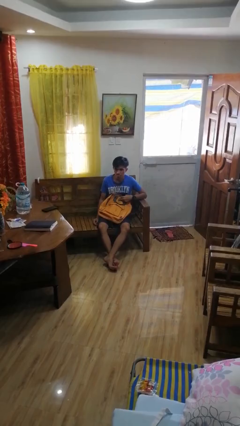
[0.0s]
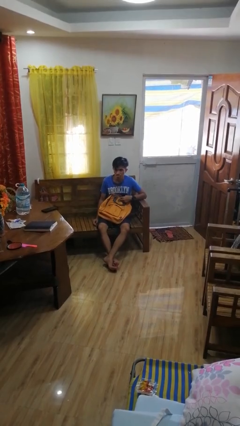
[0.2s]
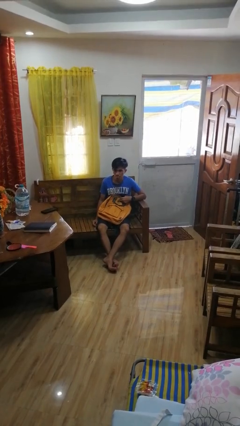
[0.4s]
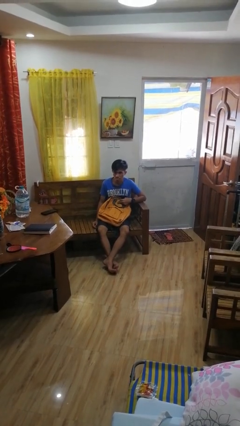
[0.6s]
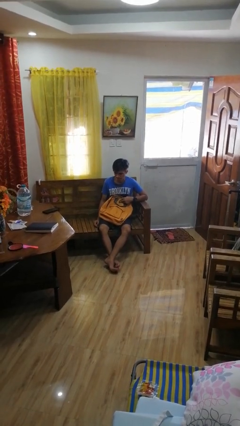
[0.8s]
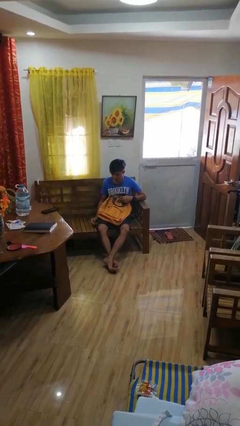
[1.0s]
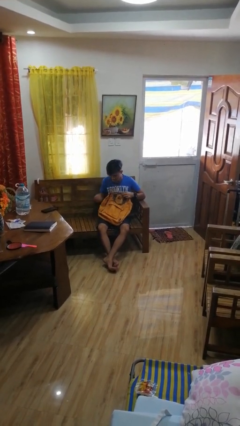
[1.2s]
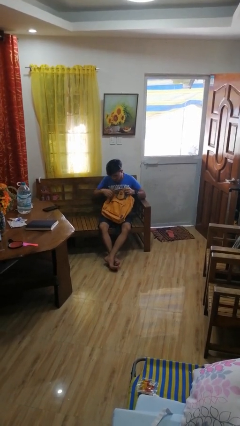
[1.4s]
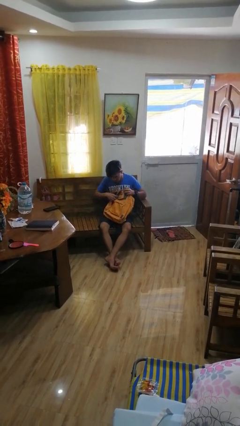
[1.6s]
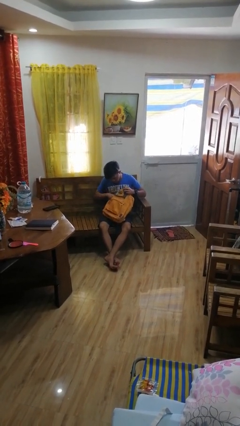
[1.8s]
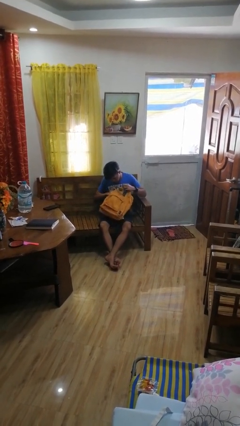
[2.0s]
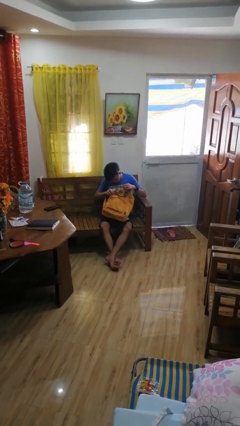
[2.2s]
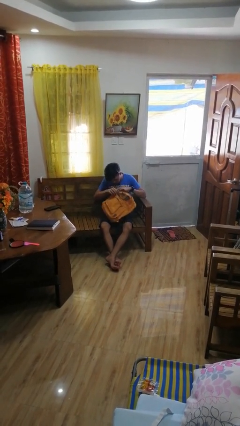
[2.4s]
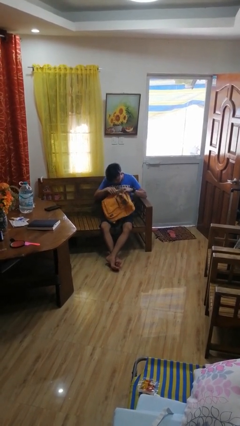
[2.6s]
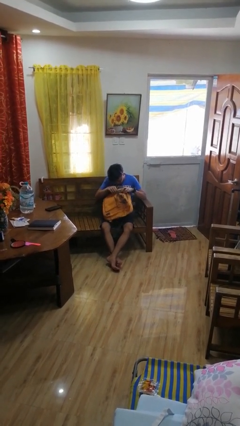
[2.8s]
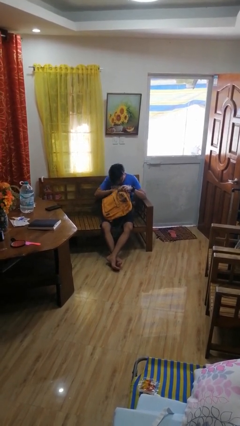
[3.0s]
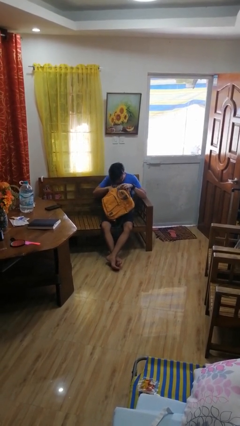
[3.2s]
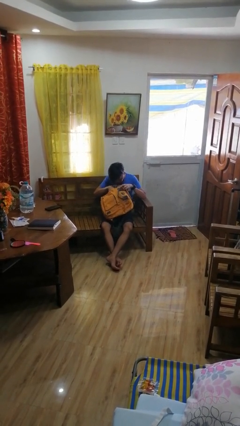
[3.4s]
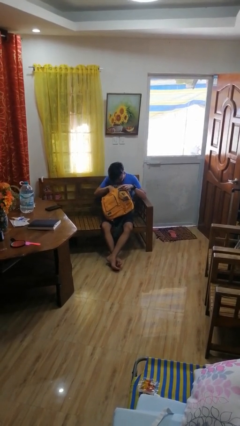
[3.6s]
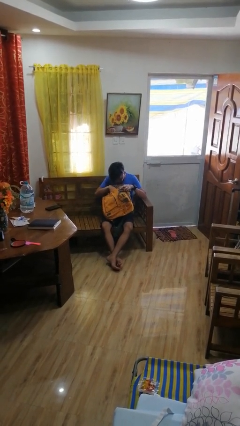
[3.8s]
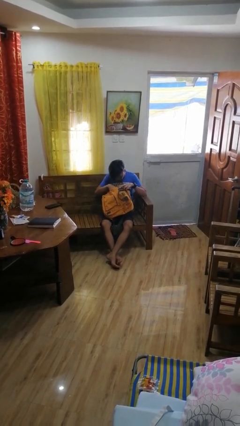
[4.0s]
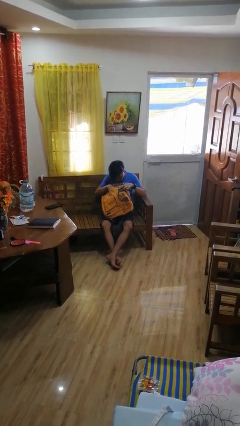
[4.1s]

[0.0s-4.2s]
person searches in backpack

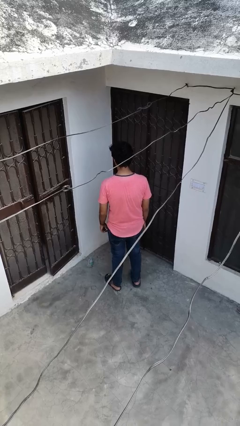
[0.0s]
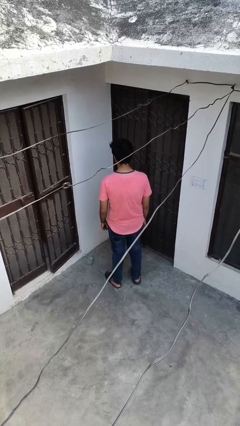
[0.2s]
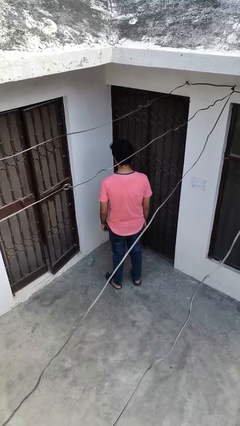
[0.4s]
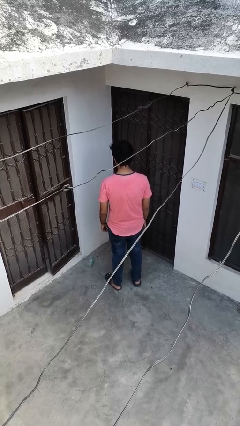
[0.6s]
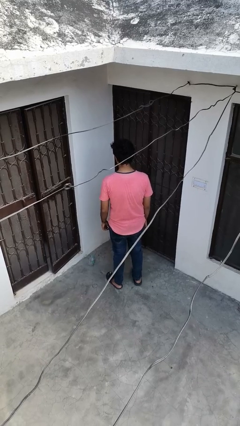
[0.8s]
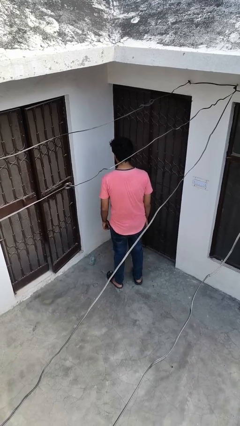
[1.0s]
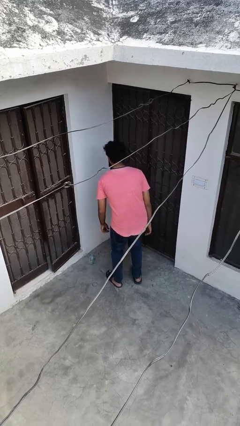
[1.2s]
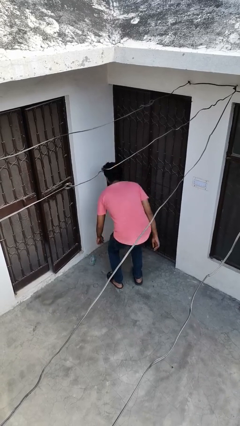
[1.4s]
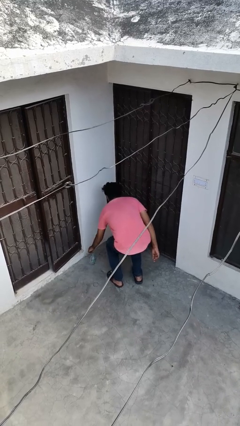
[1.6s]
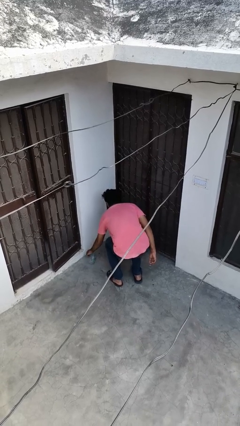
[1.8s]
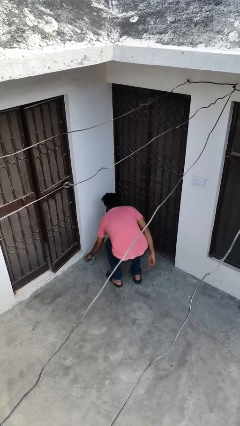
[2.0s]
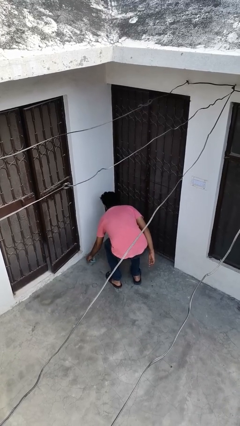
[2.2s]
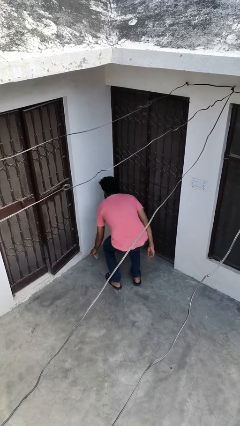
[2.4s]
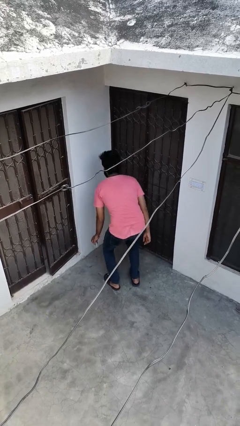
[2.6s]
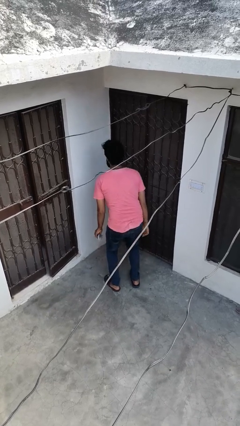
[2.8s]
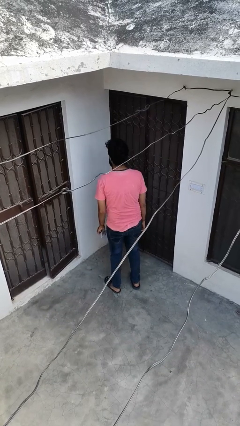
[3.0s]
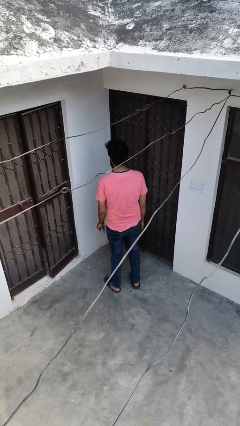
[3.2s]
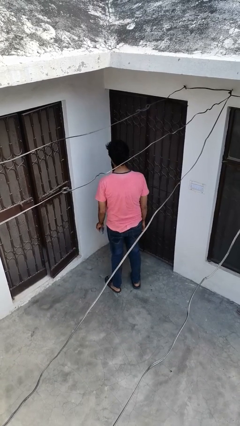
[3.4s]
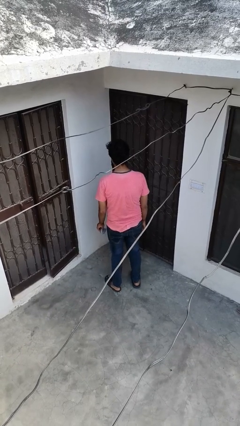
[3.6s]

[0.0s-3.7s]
person picks up object from floor

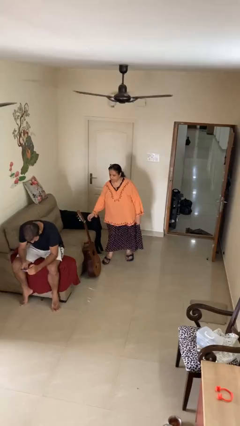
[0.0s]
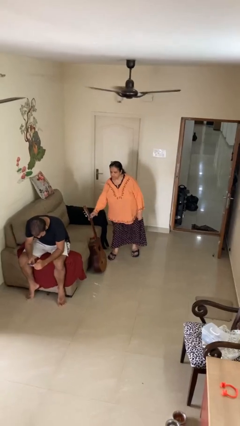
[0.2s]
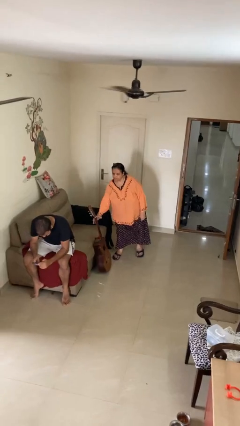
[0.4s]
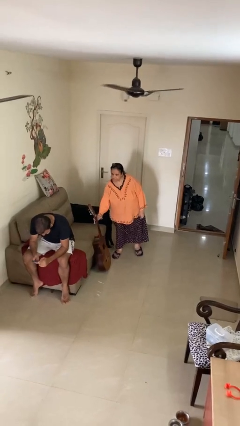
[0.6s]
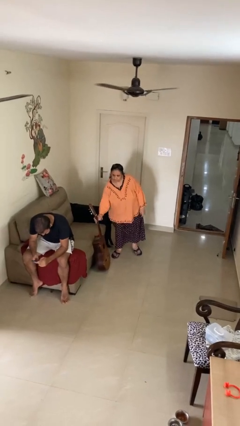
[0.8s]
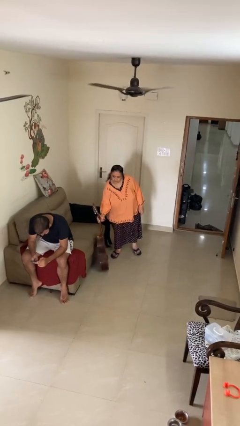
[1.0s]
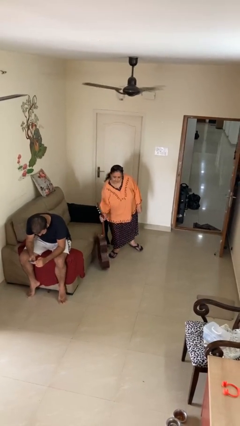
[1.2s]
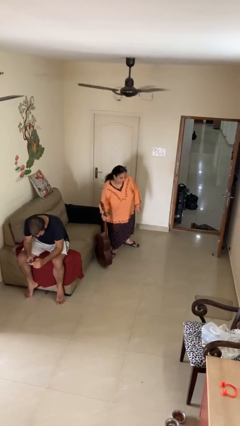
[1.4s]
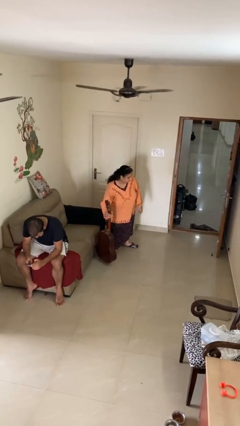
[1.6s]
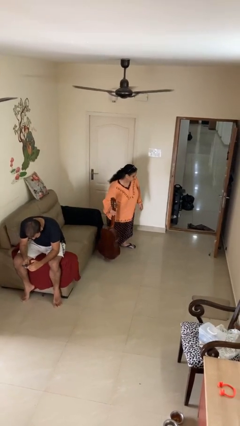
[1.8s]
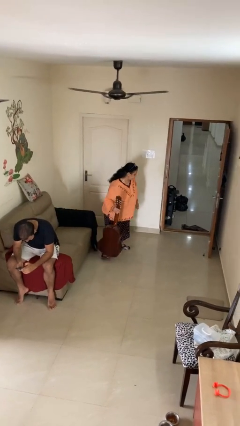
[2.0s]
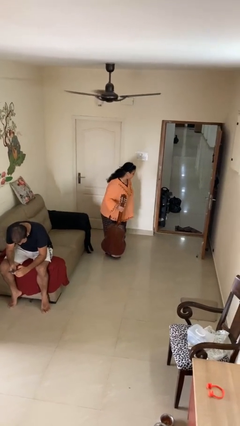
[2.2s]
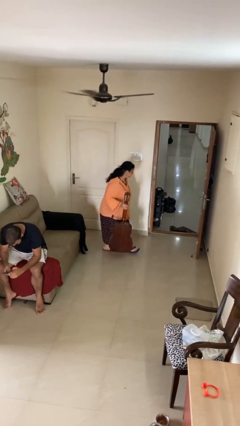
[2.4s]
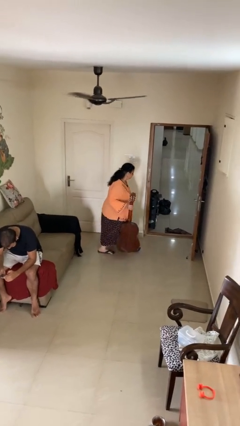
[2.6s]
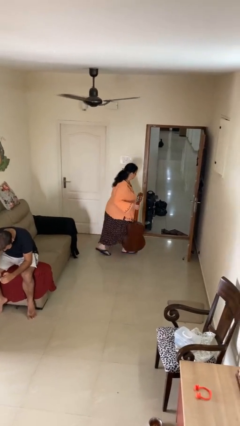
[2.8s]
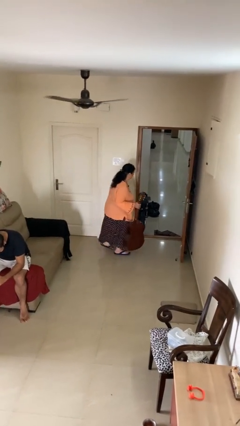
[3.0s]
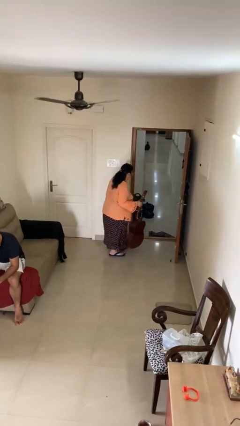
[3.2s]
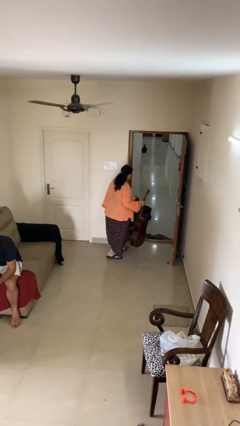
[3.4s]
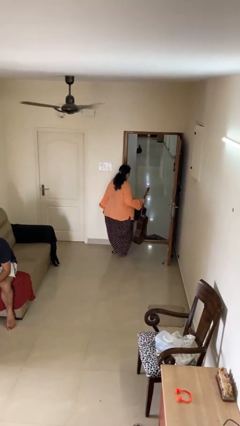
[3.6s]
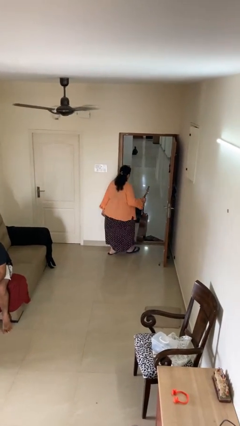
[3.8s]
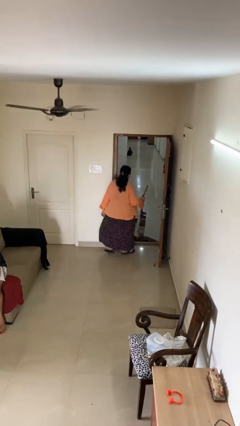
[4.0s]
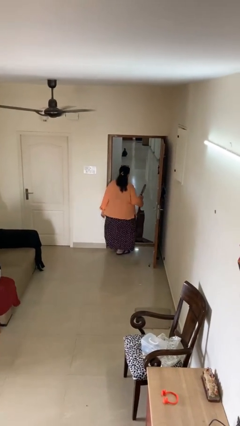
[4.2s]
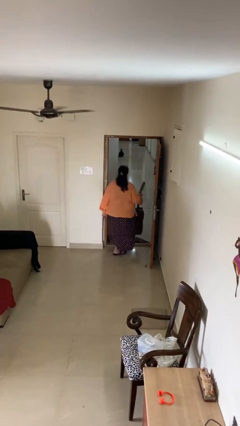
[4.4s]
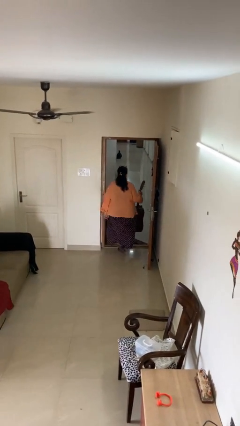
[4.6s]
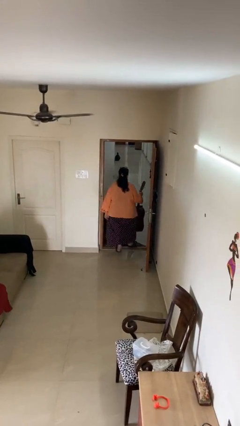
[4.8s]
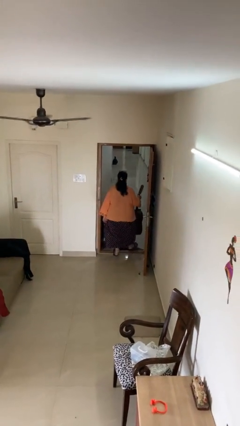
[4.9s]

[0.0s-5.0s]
person steals object from person

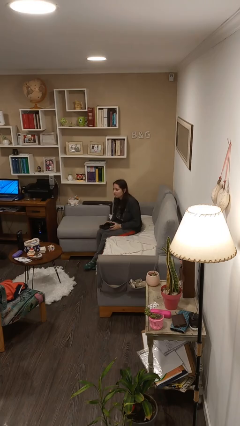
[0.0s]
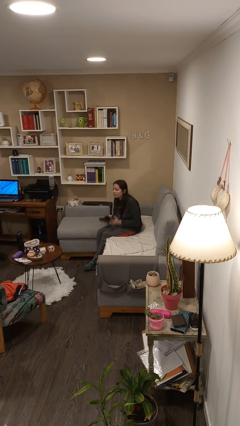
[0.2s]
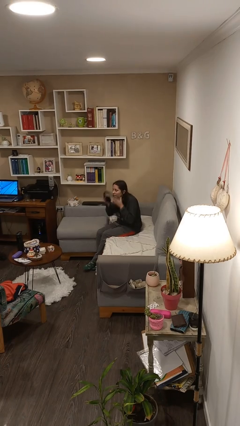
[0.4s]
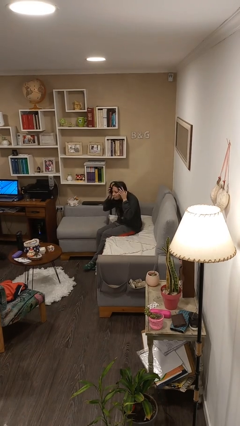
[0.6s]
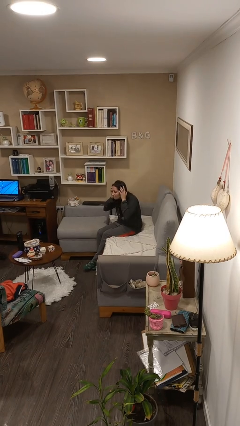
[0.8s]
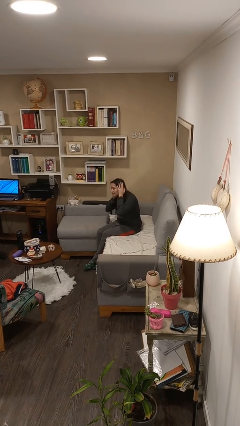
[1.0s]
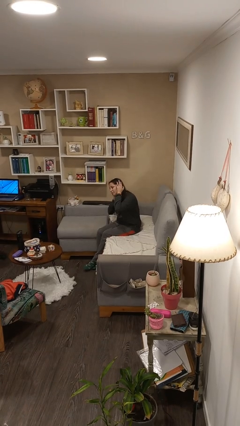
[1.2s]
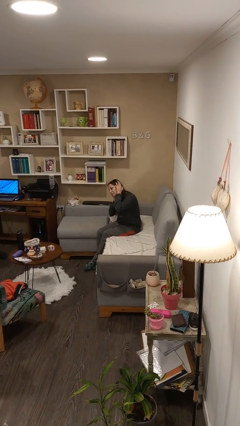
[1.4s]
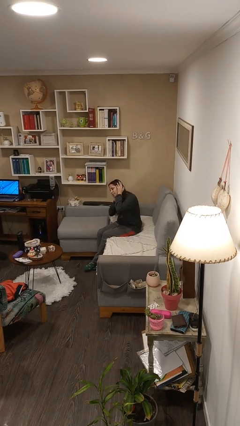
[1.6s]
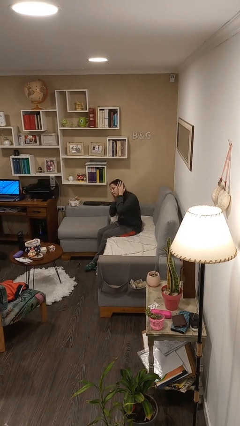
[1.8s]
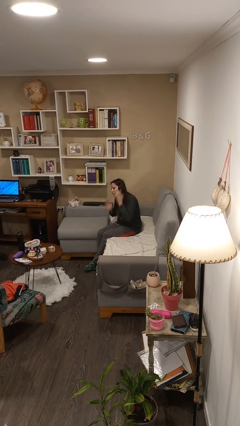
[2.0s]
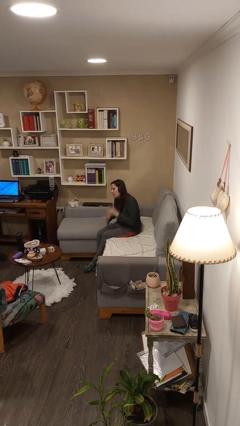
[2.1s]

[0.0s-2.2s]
person puts on headphones

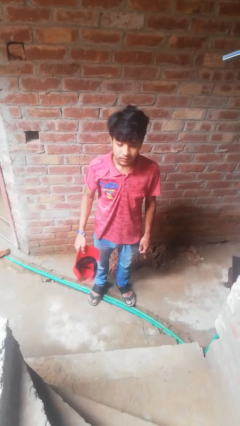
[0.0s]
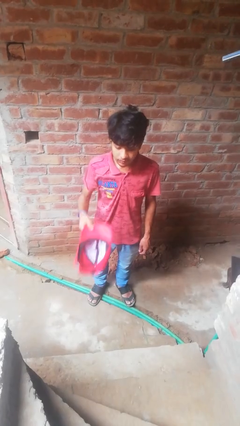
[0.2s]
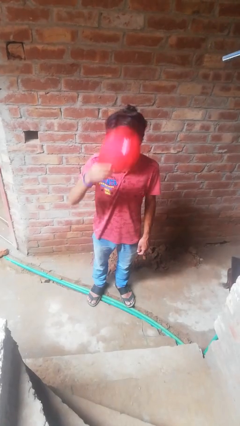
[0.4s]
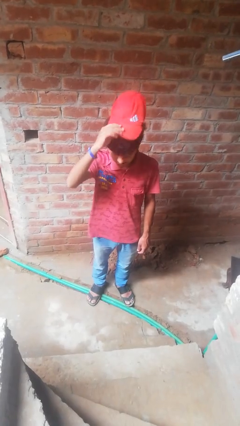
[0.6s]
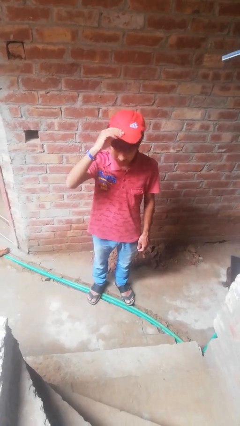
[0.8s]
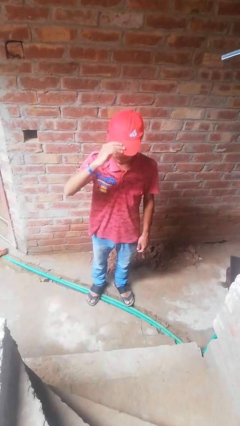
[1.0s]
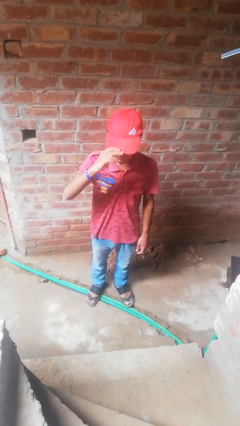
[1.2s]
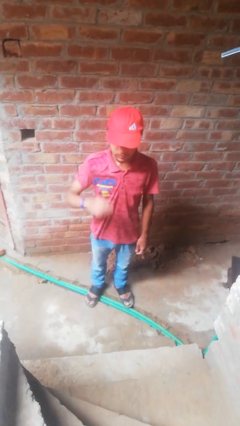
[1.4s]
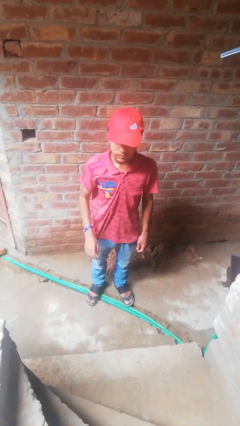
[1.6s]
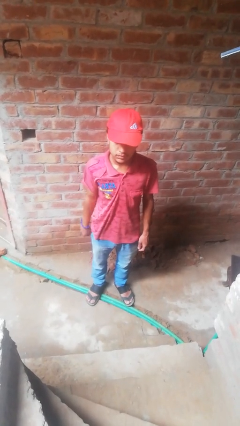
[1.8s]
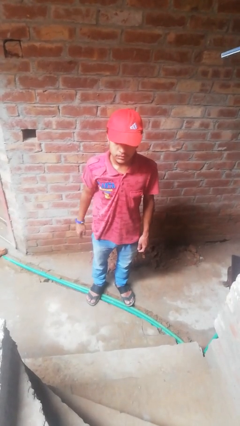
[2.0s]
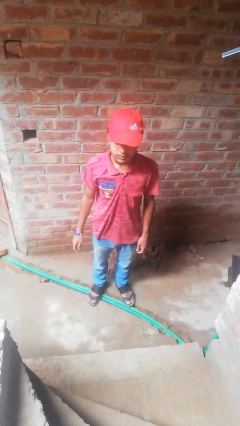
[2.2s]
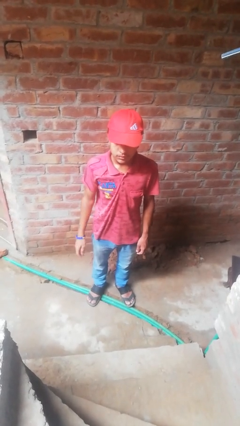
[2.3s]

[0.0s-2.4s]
person puts on hat

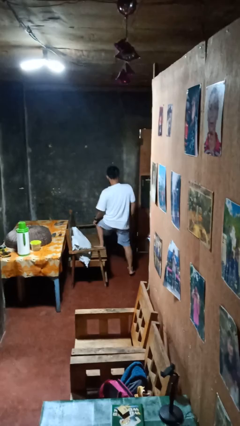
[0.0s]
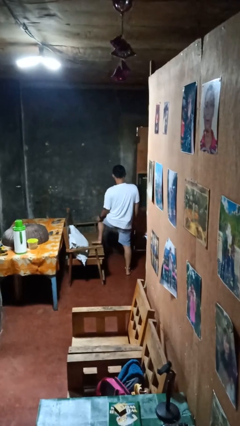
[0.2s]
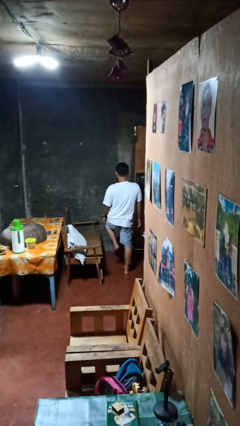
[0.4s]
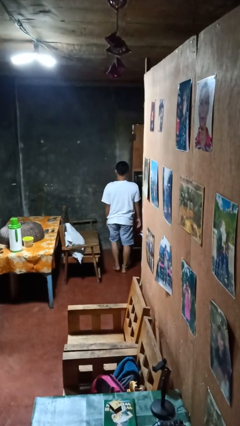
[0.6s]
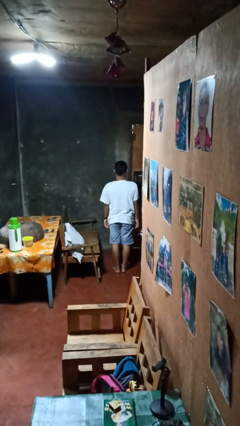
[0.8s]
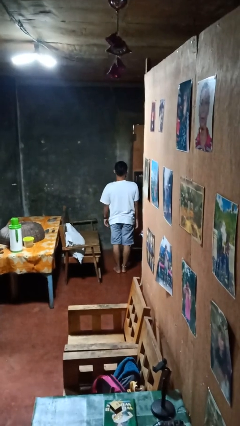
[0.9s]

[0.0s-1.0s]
person climbs off couch
